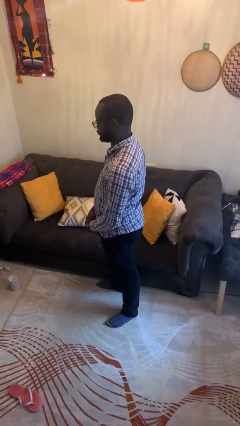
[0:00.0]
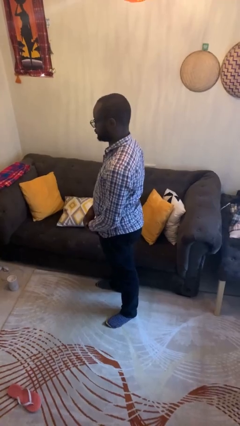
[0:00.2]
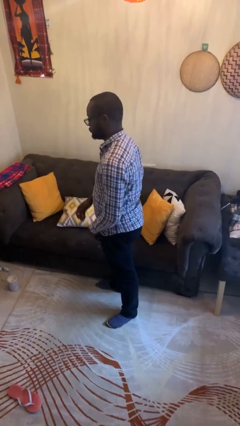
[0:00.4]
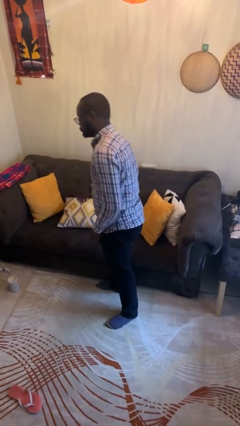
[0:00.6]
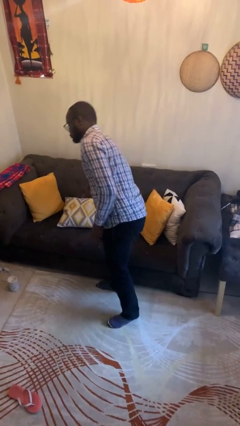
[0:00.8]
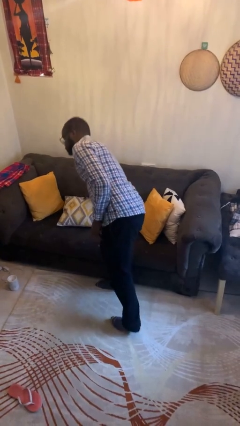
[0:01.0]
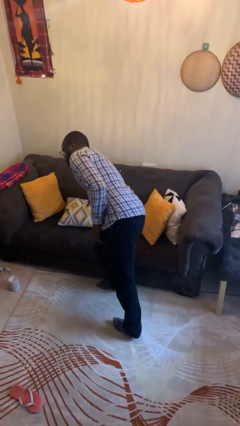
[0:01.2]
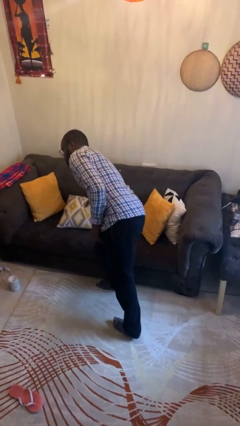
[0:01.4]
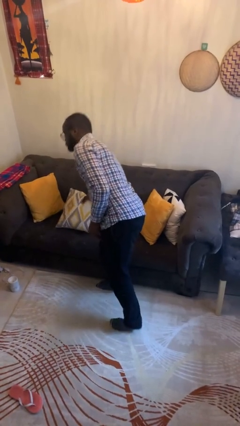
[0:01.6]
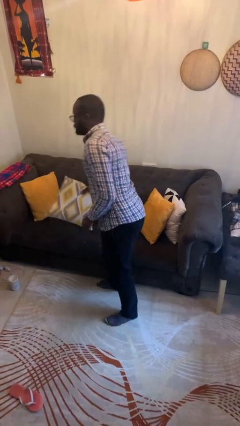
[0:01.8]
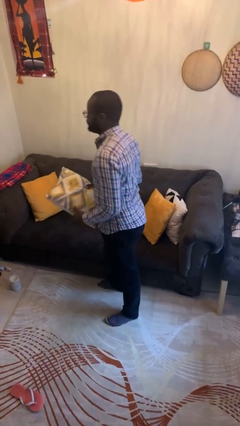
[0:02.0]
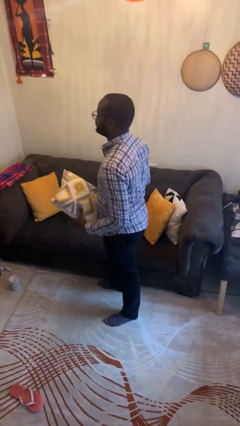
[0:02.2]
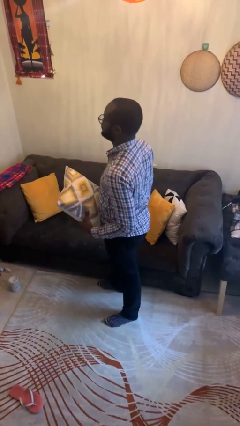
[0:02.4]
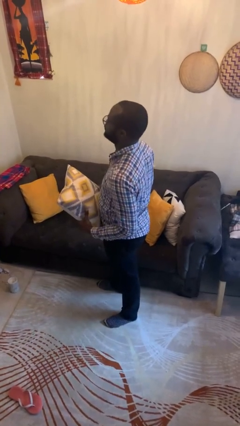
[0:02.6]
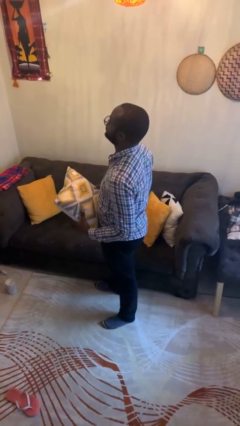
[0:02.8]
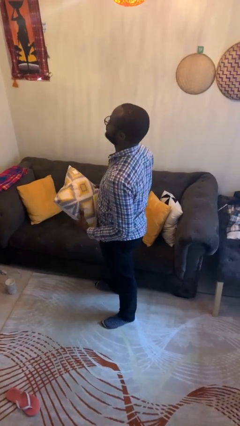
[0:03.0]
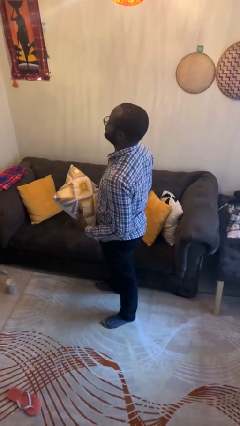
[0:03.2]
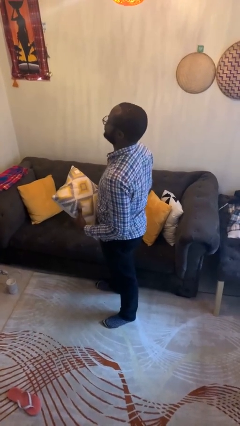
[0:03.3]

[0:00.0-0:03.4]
person picks up object from couch

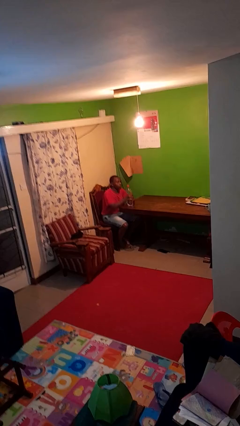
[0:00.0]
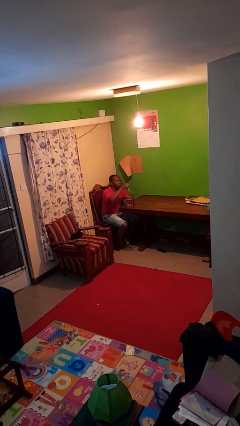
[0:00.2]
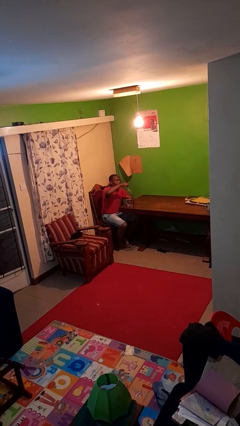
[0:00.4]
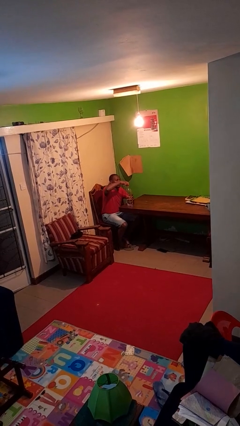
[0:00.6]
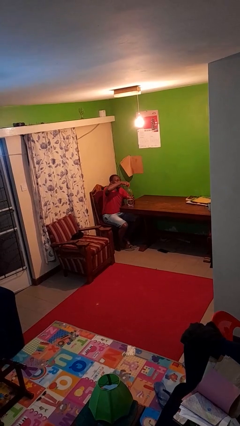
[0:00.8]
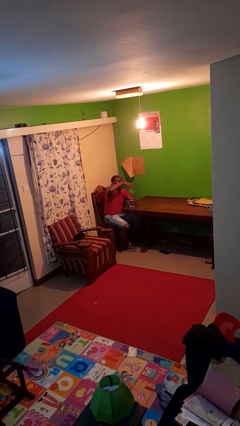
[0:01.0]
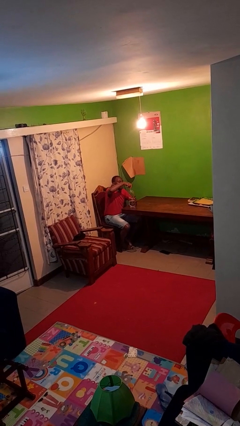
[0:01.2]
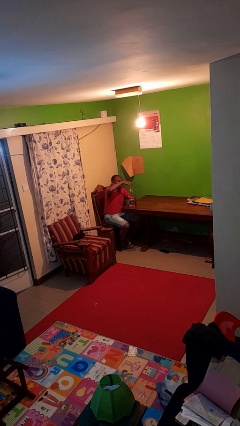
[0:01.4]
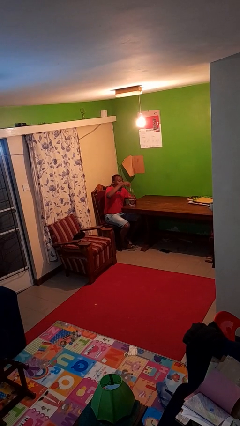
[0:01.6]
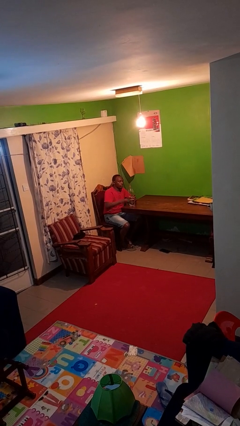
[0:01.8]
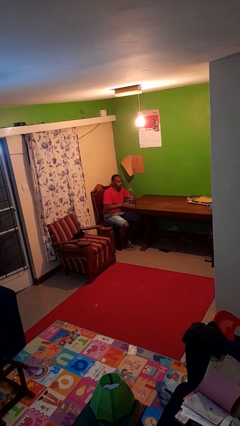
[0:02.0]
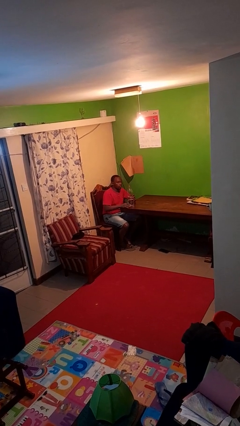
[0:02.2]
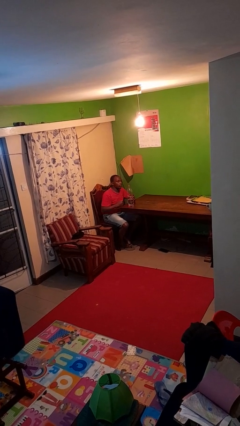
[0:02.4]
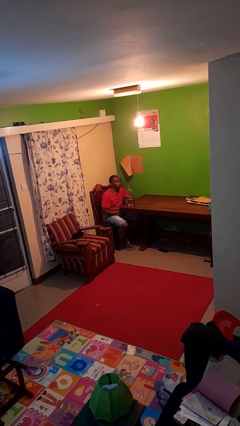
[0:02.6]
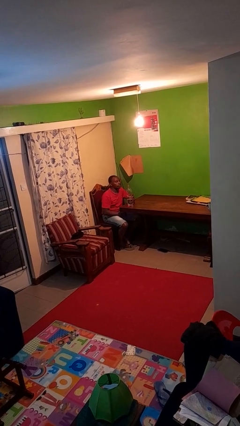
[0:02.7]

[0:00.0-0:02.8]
person unscrews lid from bottle

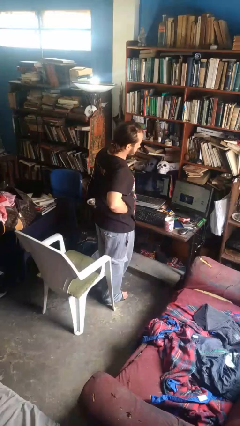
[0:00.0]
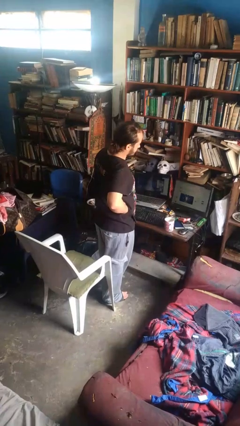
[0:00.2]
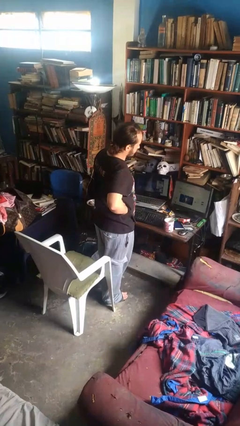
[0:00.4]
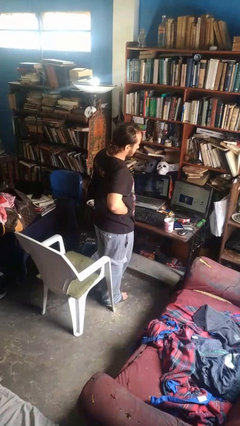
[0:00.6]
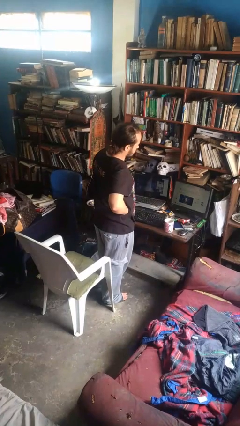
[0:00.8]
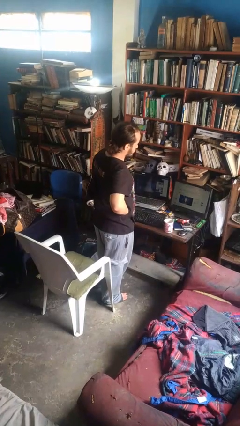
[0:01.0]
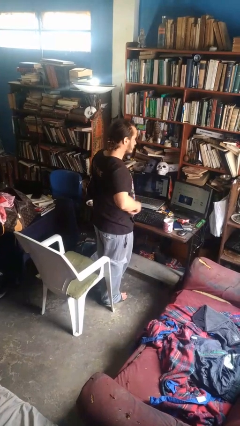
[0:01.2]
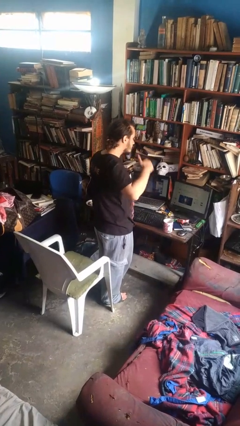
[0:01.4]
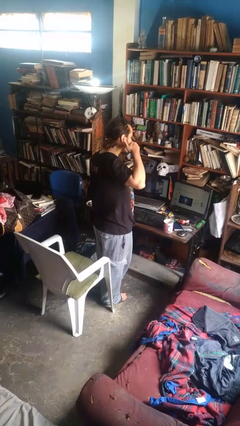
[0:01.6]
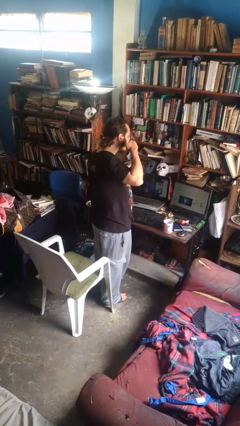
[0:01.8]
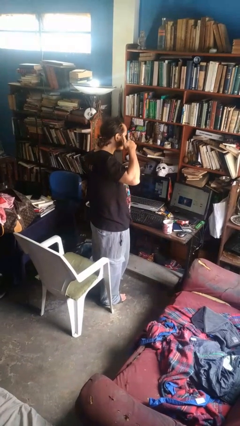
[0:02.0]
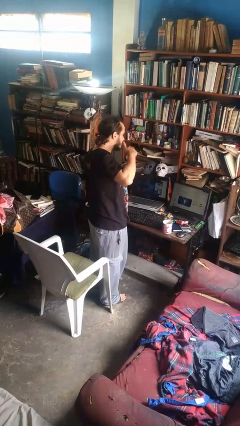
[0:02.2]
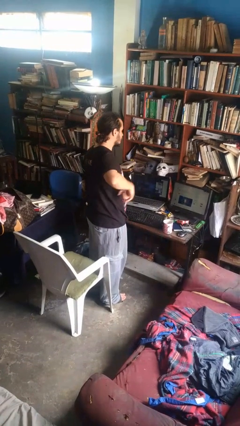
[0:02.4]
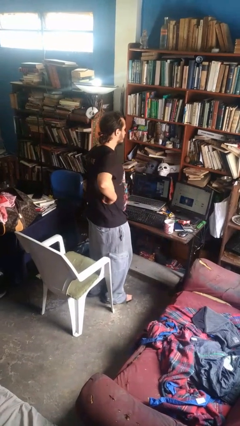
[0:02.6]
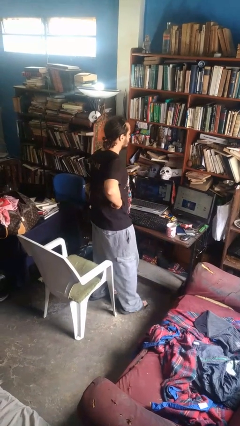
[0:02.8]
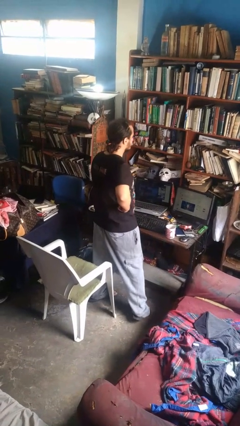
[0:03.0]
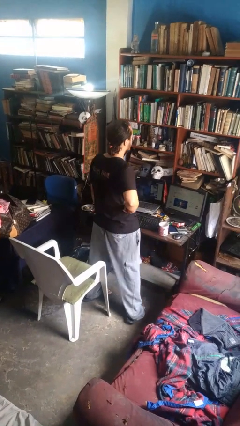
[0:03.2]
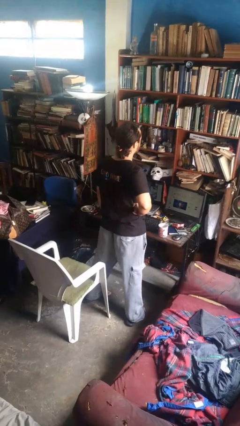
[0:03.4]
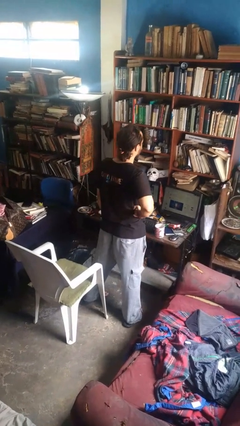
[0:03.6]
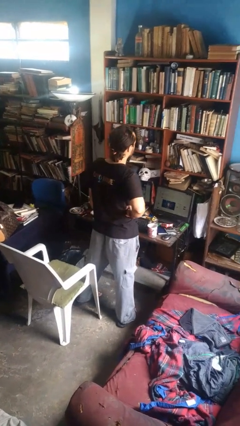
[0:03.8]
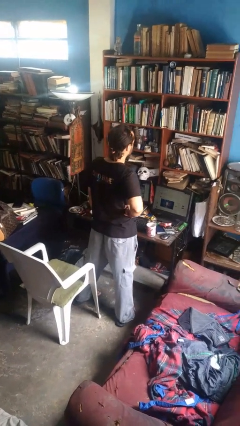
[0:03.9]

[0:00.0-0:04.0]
person gestures call me

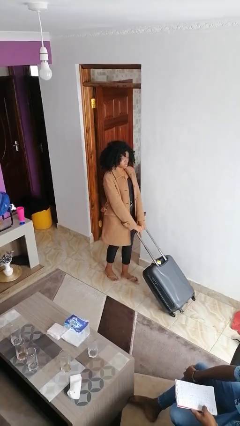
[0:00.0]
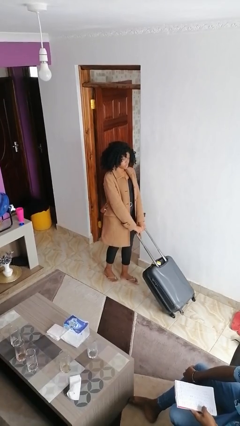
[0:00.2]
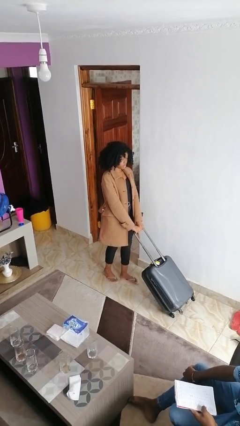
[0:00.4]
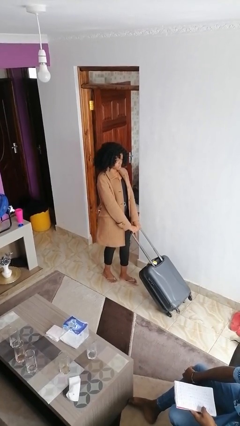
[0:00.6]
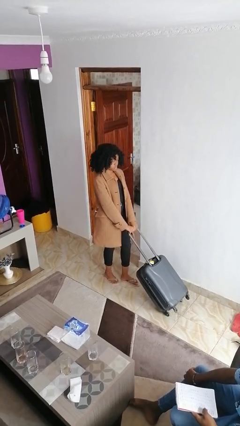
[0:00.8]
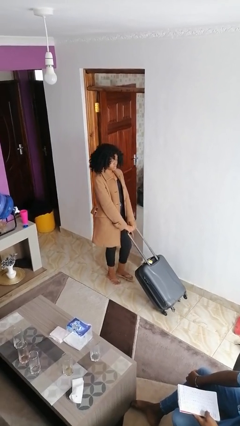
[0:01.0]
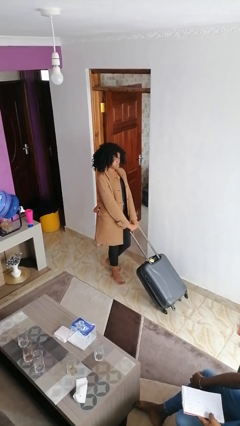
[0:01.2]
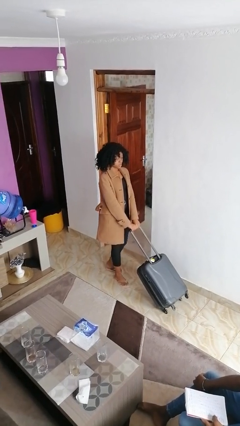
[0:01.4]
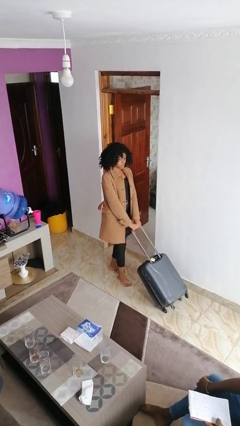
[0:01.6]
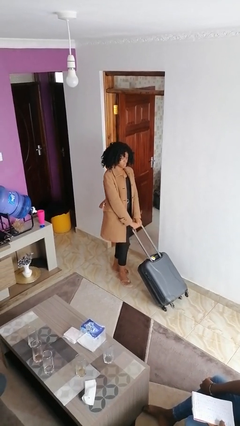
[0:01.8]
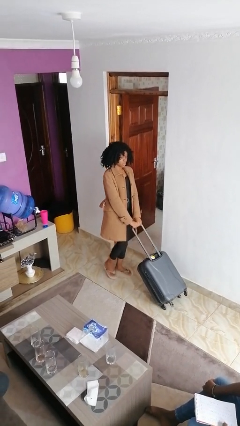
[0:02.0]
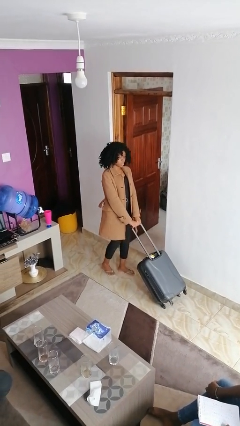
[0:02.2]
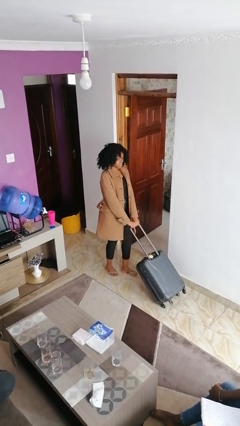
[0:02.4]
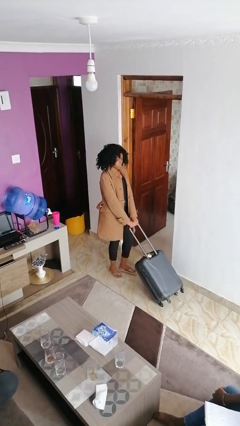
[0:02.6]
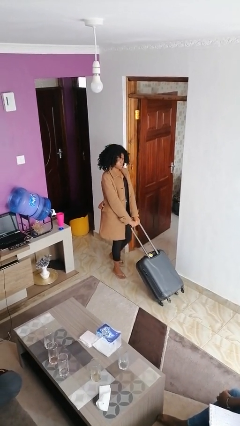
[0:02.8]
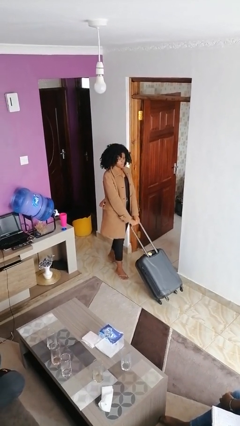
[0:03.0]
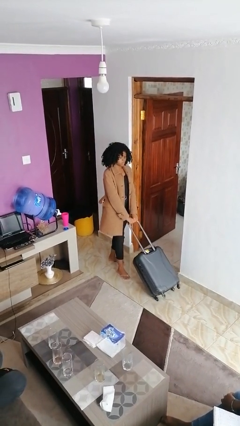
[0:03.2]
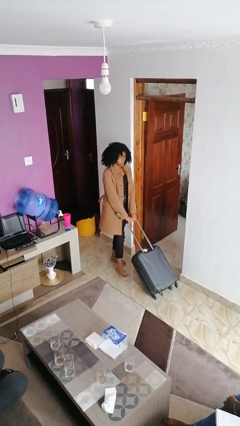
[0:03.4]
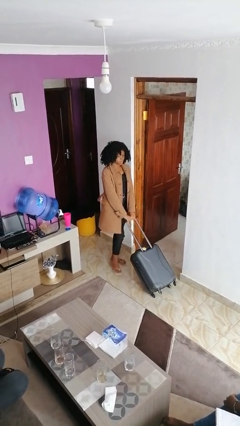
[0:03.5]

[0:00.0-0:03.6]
person pulls wheeled cart

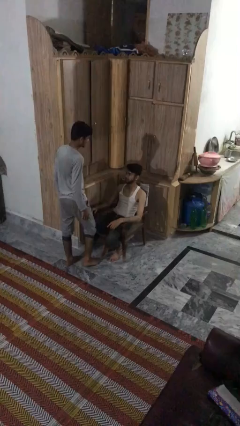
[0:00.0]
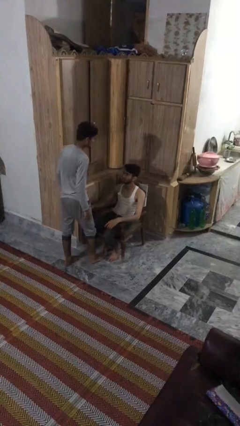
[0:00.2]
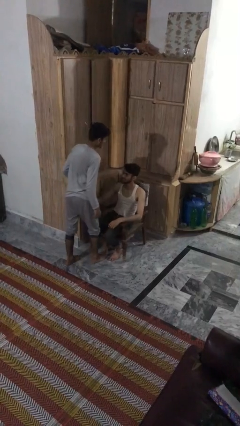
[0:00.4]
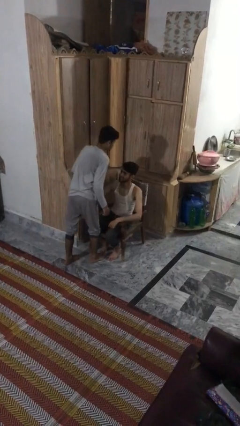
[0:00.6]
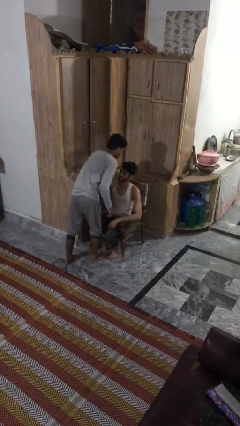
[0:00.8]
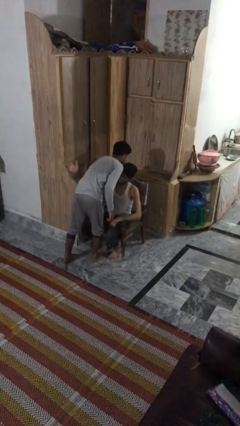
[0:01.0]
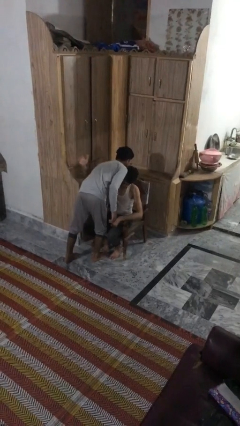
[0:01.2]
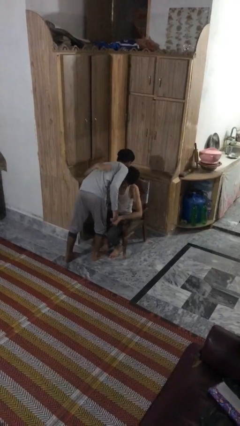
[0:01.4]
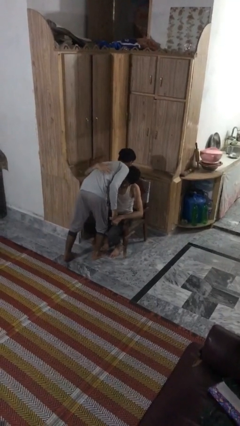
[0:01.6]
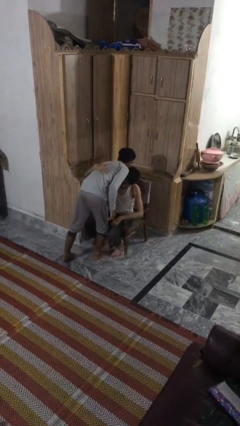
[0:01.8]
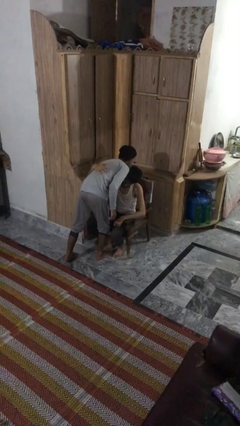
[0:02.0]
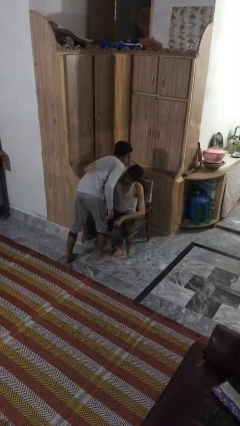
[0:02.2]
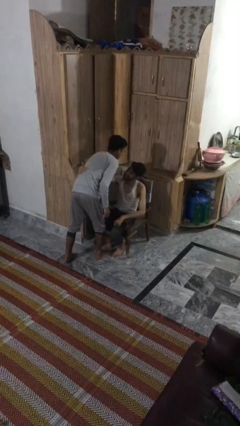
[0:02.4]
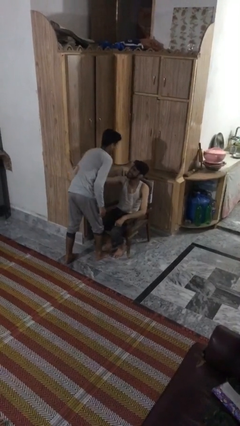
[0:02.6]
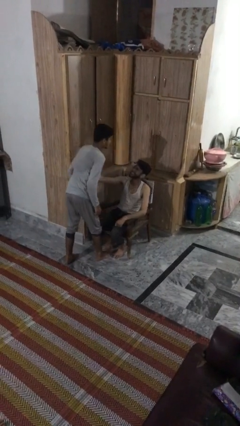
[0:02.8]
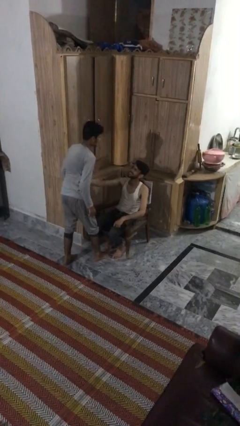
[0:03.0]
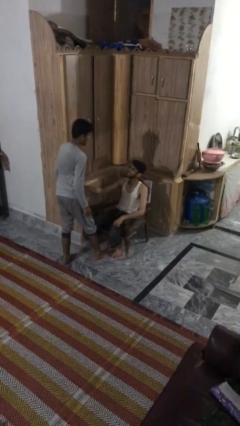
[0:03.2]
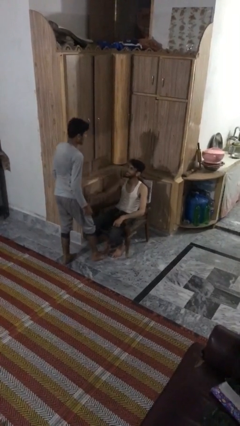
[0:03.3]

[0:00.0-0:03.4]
person embraces person

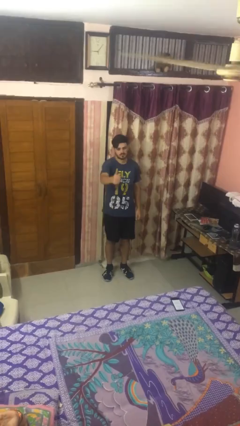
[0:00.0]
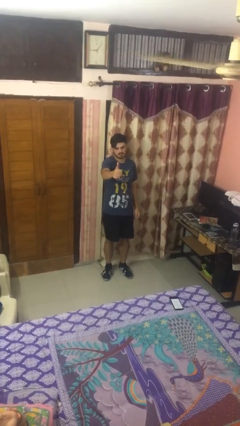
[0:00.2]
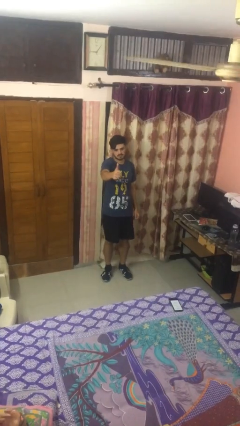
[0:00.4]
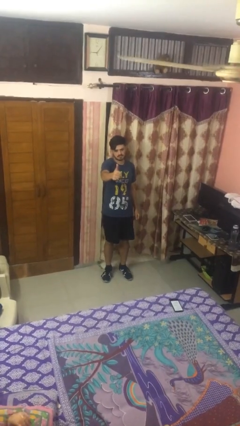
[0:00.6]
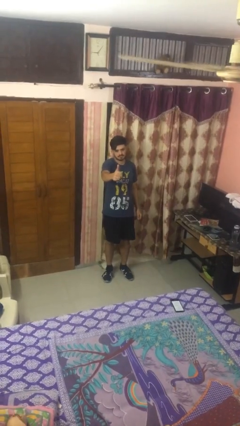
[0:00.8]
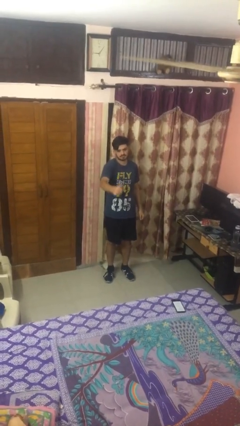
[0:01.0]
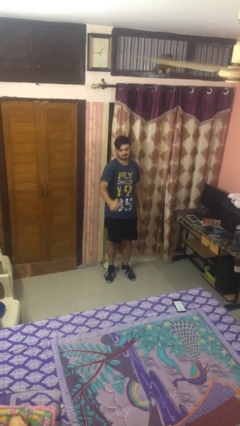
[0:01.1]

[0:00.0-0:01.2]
person gestures thumbs up
